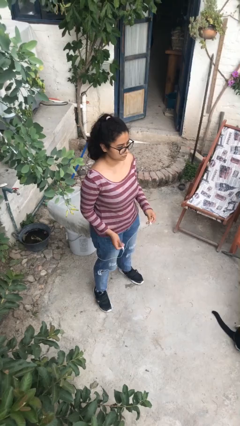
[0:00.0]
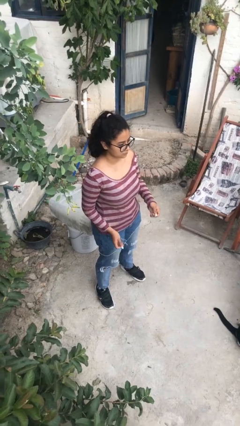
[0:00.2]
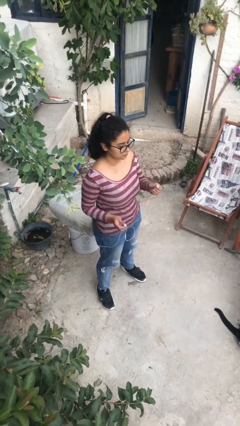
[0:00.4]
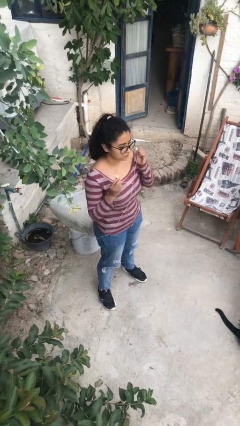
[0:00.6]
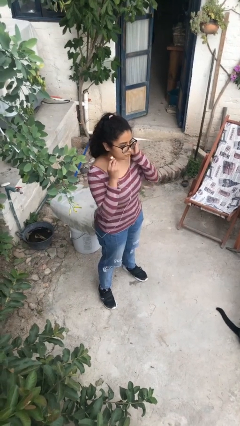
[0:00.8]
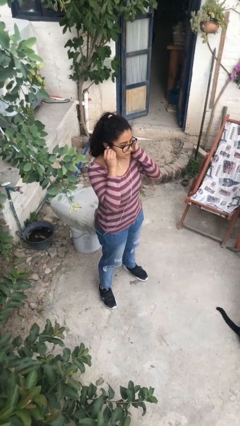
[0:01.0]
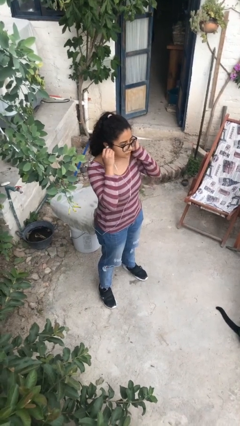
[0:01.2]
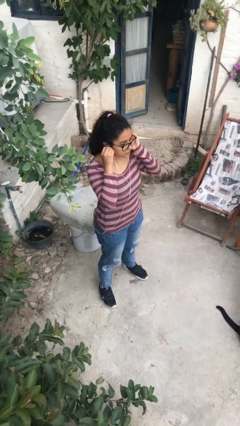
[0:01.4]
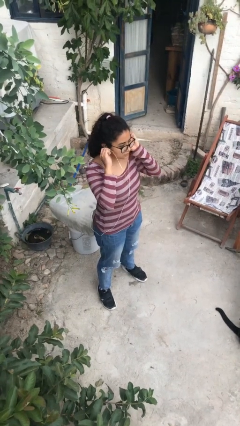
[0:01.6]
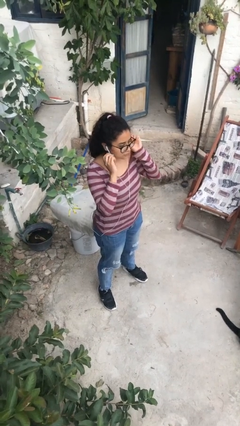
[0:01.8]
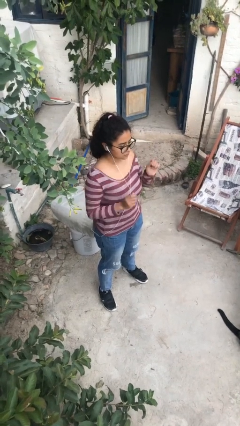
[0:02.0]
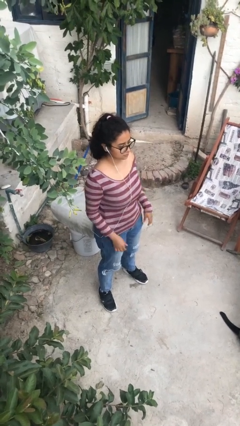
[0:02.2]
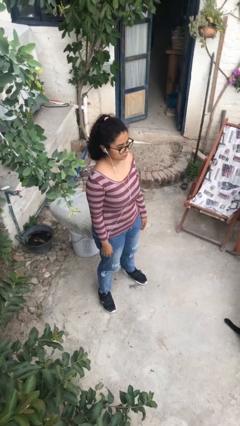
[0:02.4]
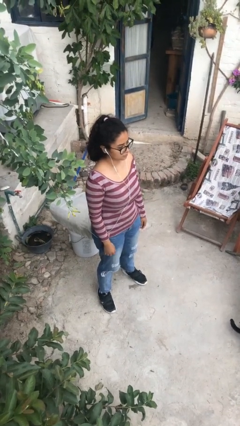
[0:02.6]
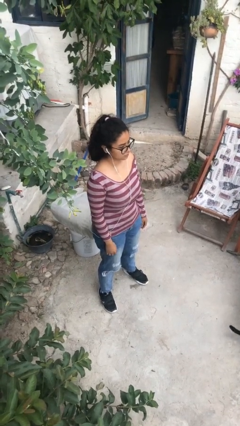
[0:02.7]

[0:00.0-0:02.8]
person puts on headphones

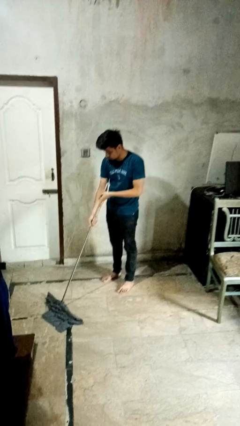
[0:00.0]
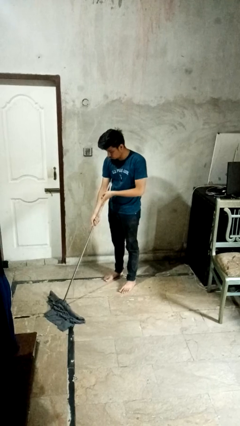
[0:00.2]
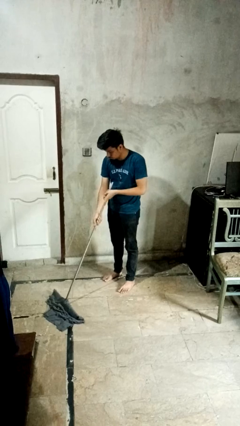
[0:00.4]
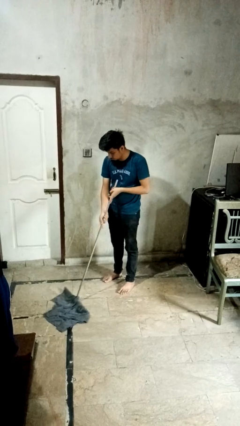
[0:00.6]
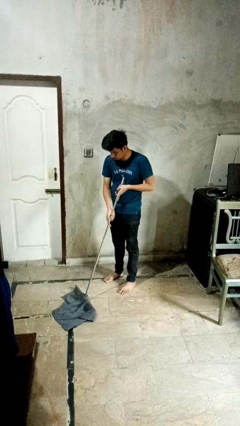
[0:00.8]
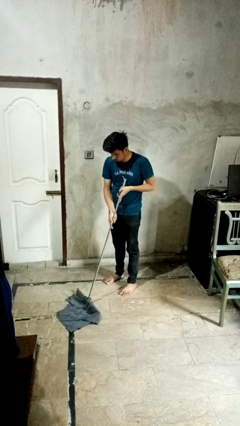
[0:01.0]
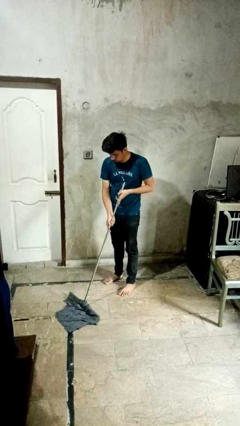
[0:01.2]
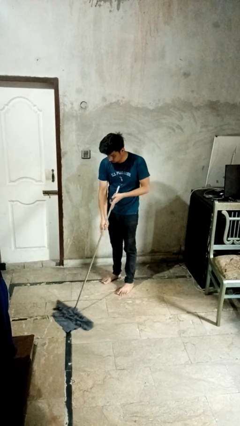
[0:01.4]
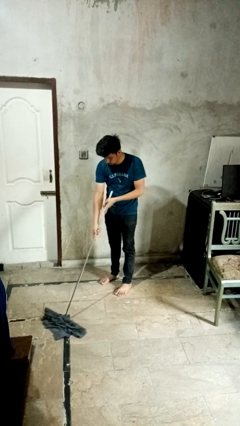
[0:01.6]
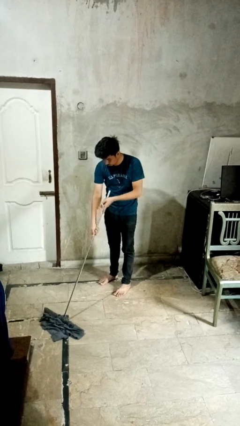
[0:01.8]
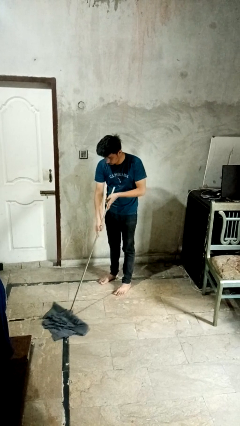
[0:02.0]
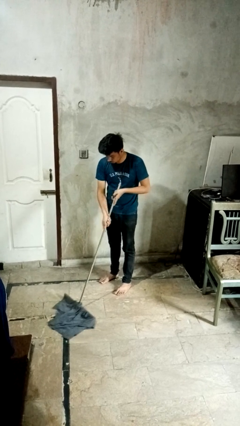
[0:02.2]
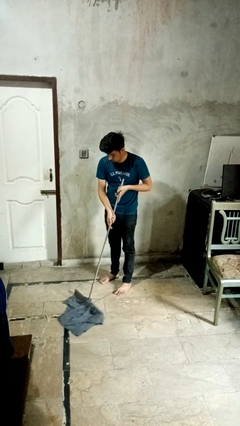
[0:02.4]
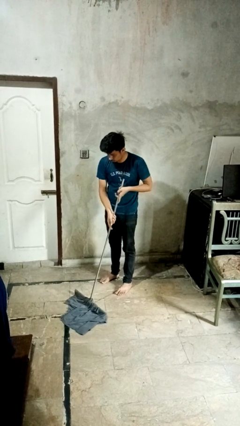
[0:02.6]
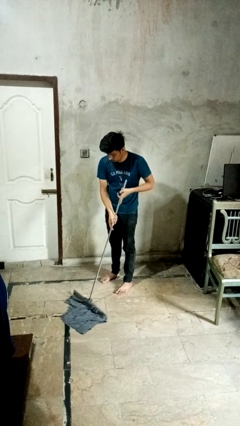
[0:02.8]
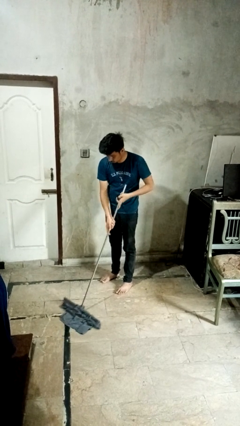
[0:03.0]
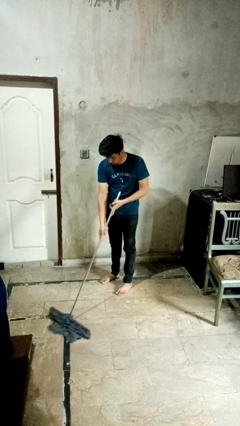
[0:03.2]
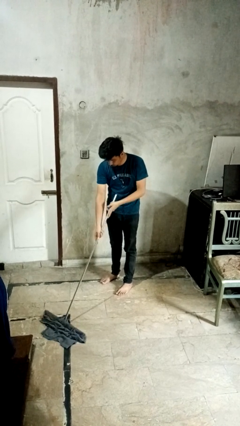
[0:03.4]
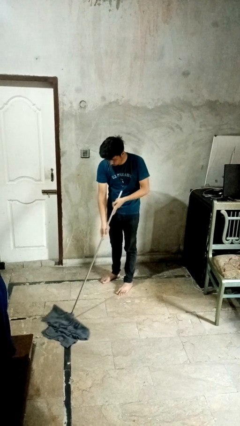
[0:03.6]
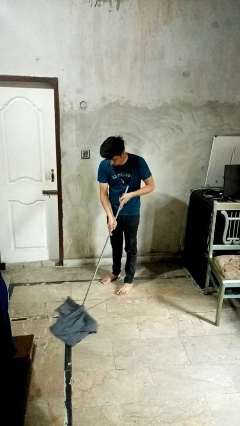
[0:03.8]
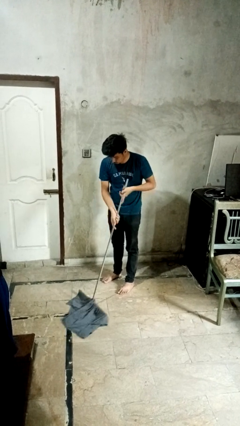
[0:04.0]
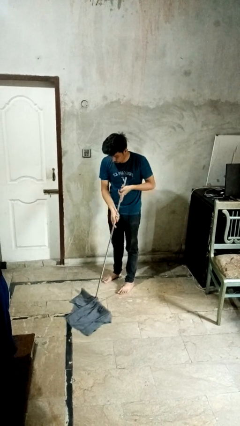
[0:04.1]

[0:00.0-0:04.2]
person mops

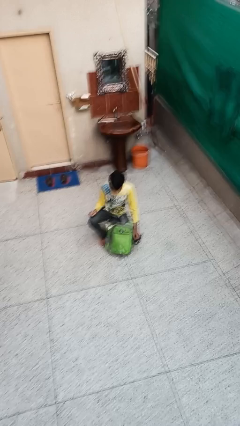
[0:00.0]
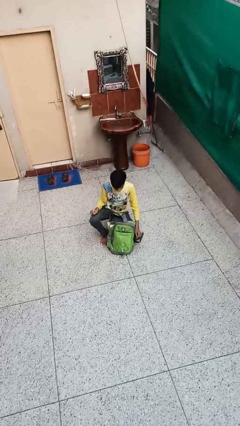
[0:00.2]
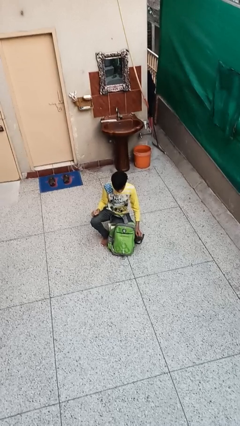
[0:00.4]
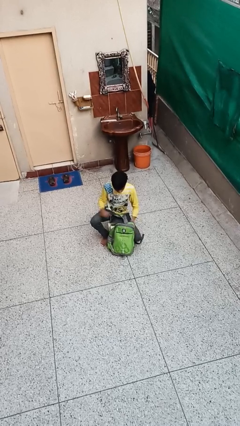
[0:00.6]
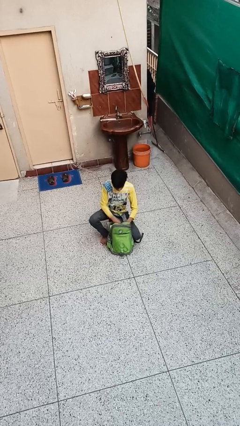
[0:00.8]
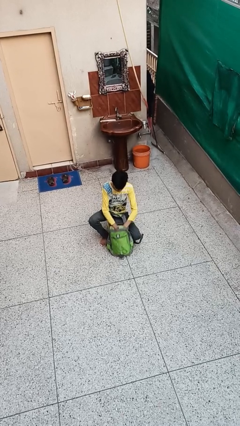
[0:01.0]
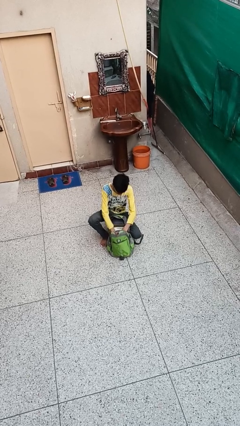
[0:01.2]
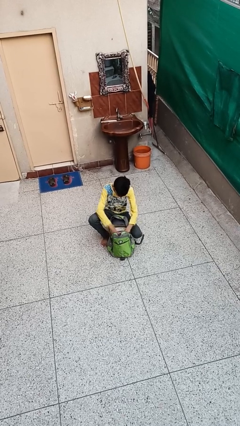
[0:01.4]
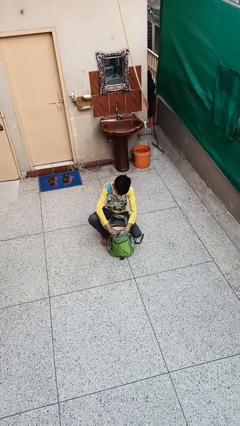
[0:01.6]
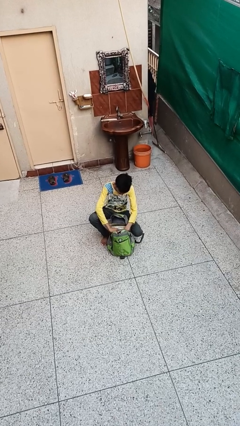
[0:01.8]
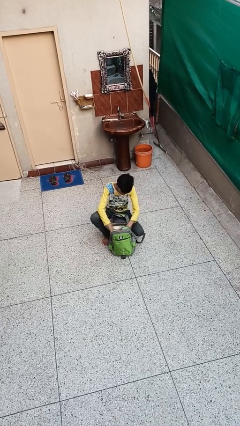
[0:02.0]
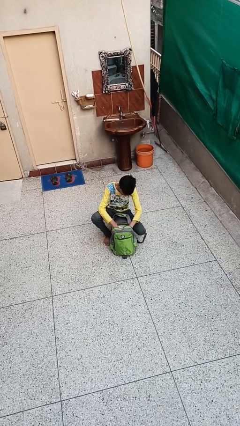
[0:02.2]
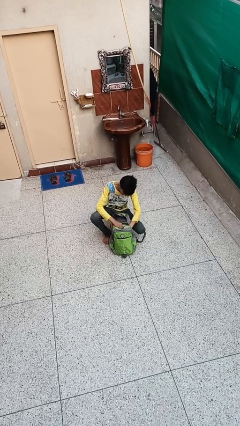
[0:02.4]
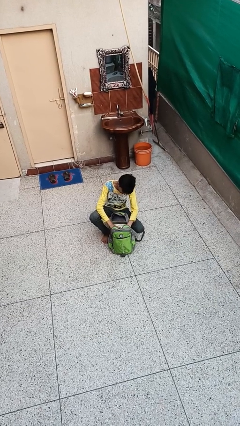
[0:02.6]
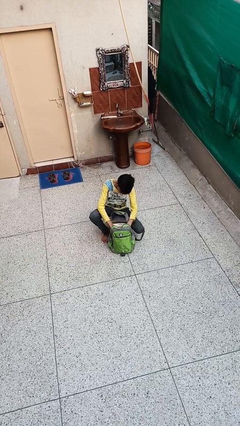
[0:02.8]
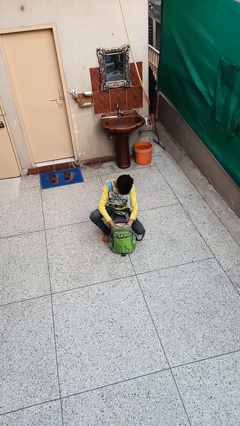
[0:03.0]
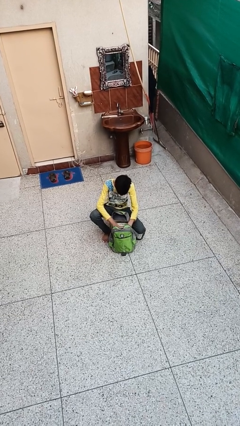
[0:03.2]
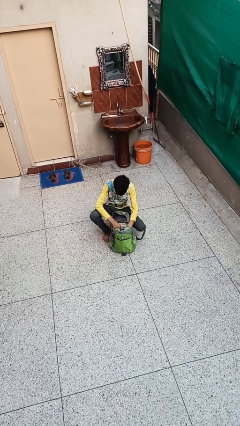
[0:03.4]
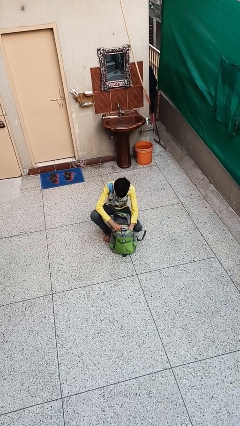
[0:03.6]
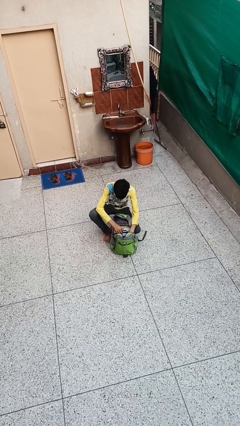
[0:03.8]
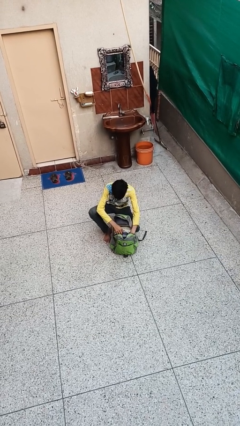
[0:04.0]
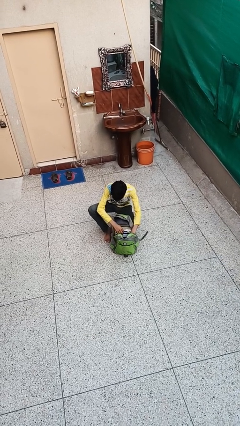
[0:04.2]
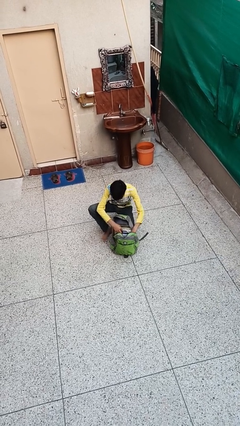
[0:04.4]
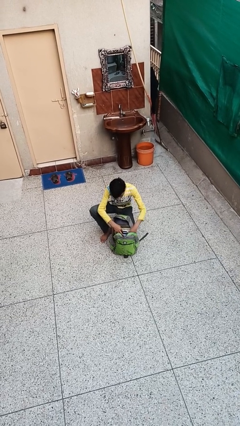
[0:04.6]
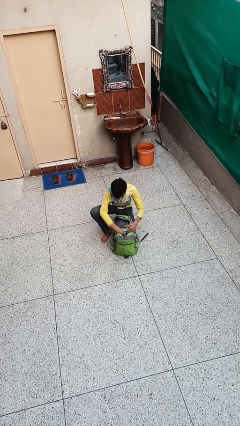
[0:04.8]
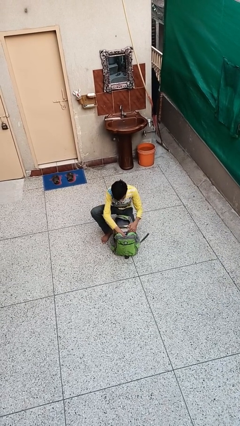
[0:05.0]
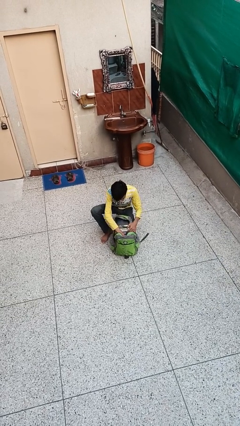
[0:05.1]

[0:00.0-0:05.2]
person searches in backpack

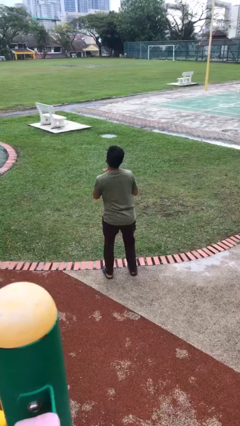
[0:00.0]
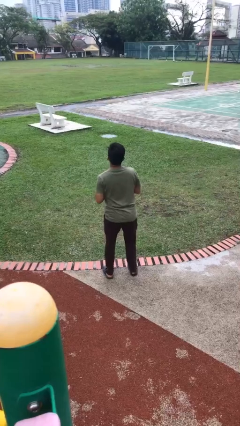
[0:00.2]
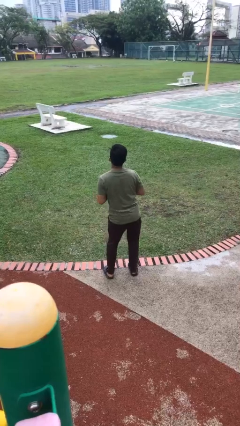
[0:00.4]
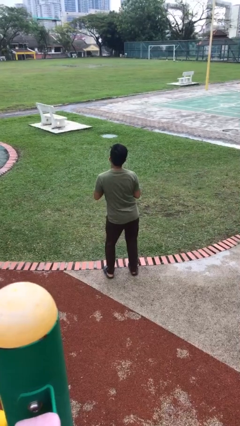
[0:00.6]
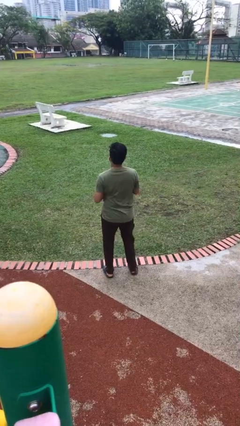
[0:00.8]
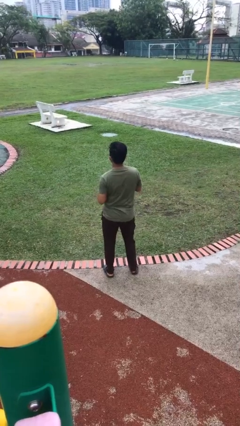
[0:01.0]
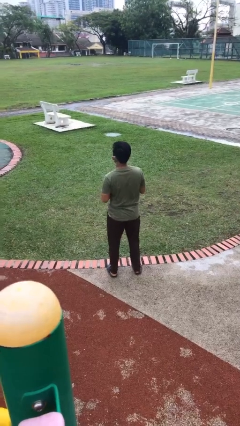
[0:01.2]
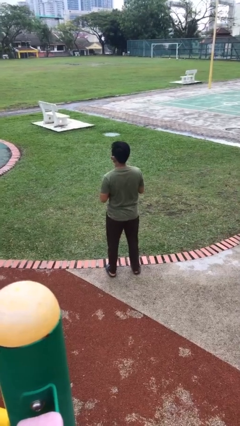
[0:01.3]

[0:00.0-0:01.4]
person wiggles hips

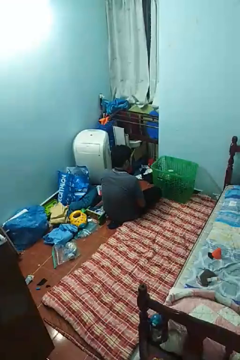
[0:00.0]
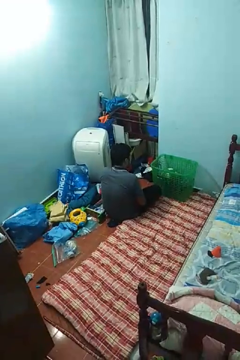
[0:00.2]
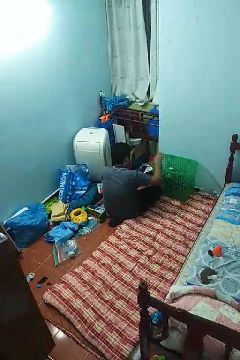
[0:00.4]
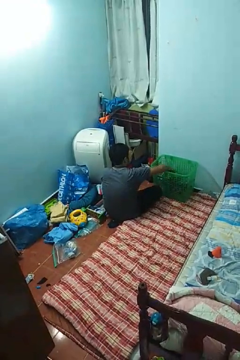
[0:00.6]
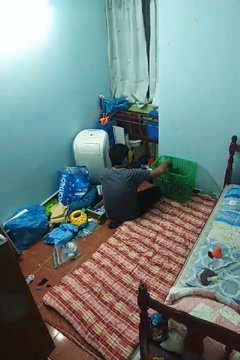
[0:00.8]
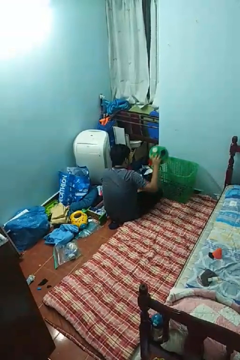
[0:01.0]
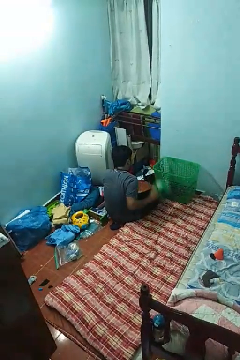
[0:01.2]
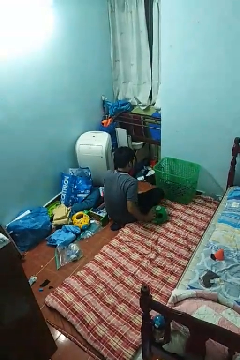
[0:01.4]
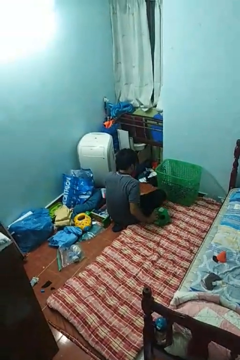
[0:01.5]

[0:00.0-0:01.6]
person takes object from basket

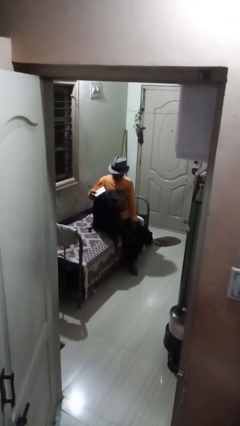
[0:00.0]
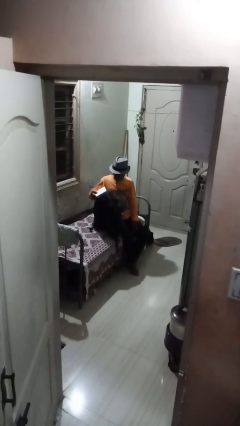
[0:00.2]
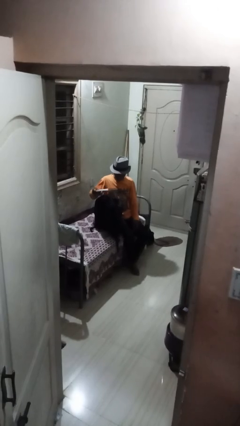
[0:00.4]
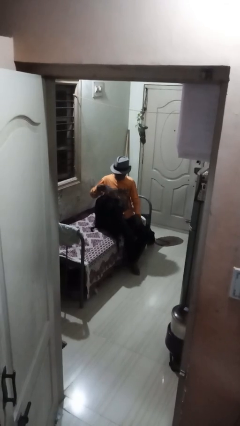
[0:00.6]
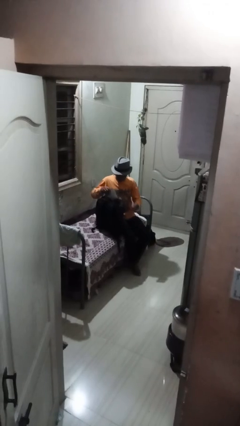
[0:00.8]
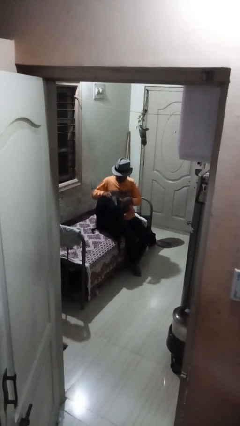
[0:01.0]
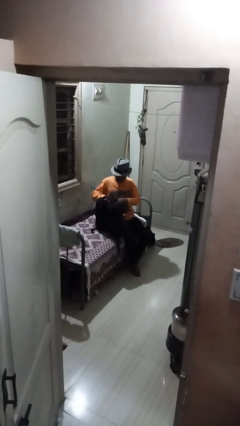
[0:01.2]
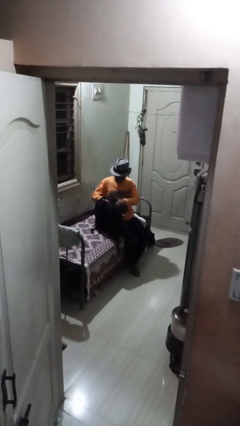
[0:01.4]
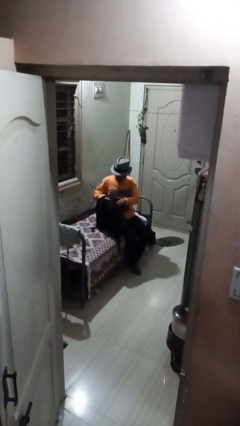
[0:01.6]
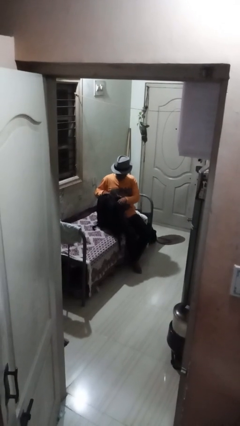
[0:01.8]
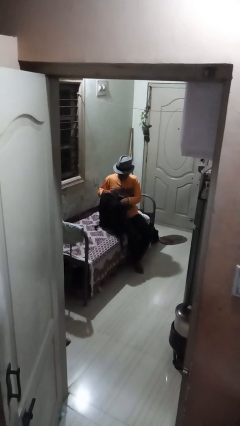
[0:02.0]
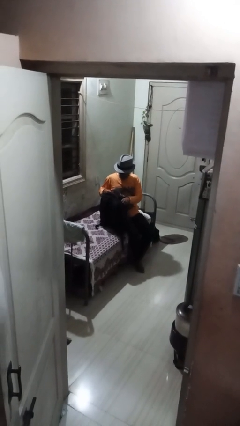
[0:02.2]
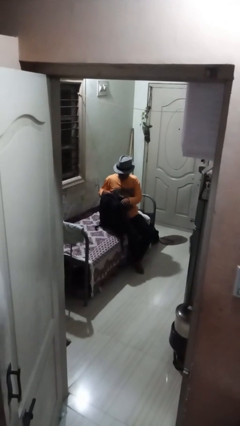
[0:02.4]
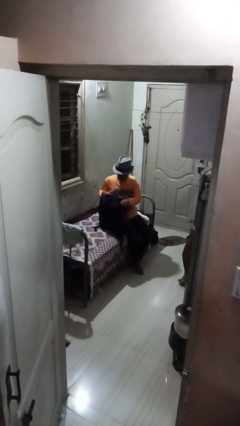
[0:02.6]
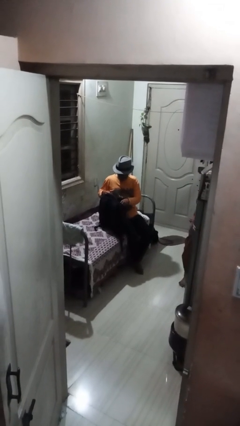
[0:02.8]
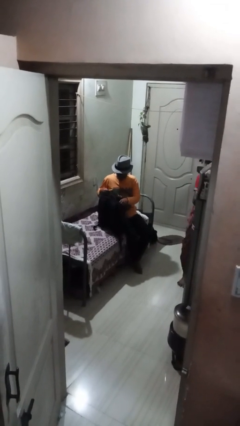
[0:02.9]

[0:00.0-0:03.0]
person puts object into backpack
